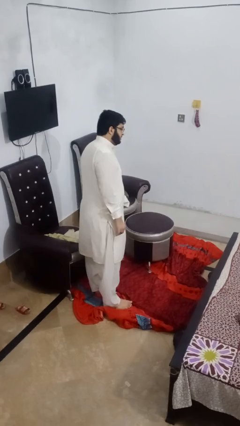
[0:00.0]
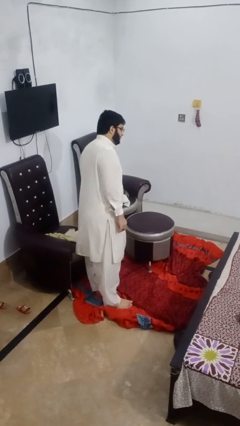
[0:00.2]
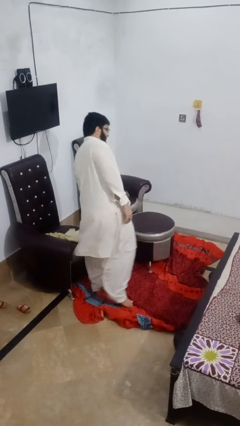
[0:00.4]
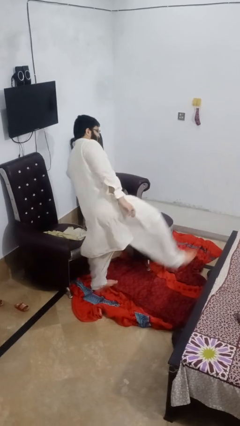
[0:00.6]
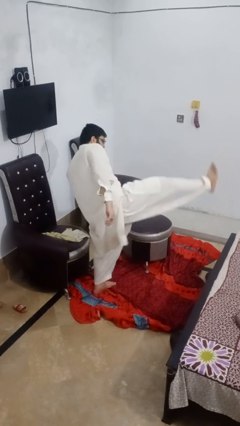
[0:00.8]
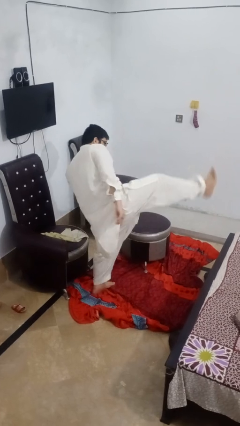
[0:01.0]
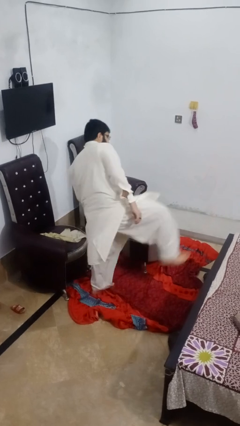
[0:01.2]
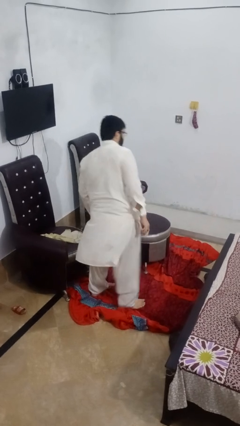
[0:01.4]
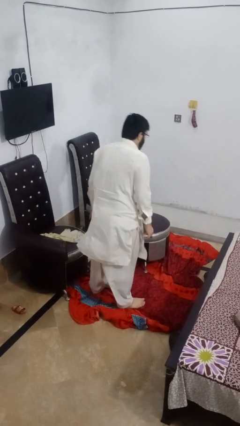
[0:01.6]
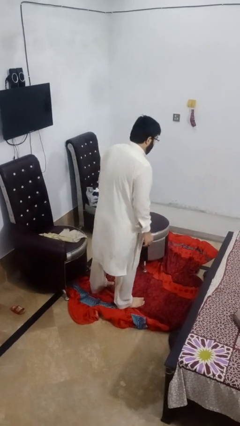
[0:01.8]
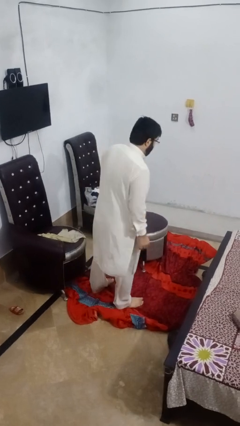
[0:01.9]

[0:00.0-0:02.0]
person karate kicks

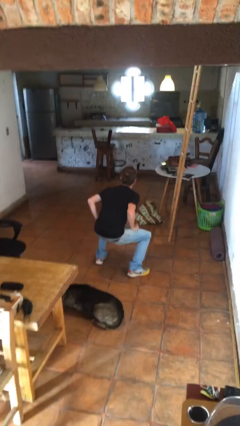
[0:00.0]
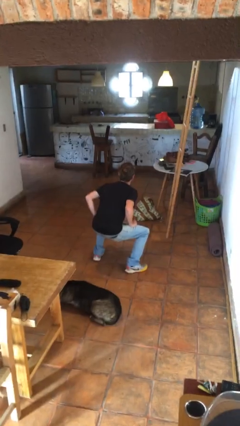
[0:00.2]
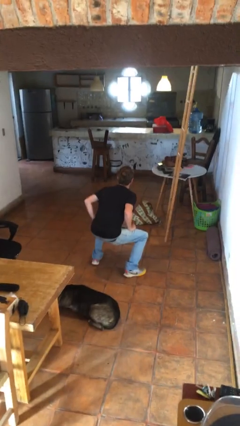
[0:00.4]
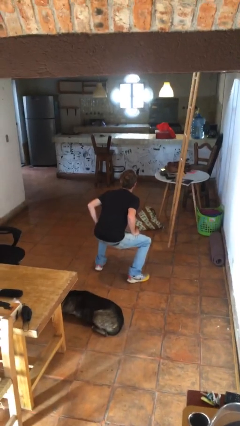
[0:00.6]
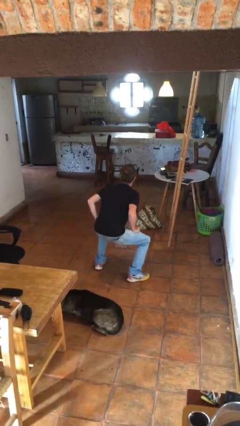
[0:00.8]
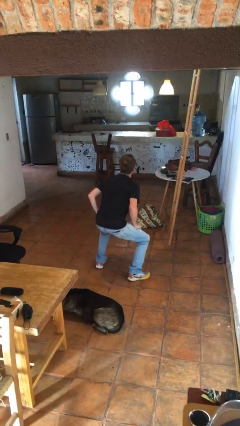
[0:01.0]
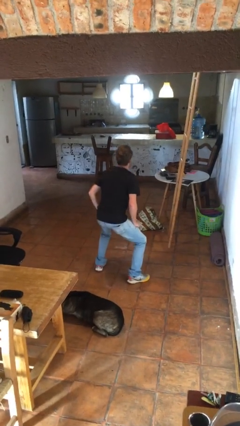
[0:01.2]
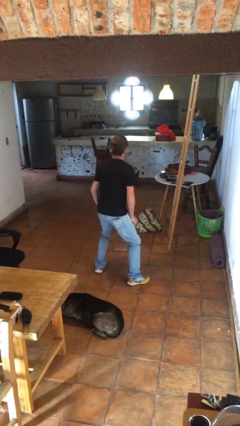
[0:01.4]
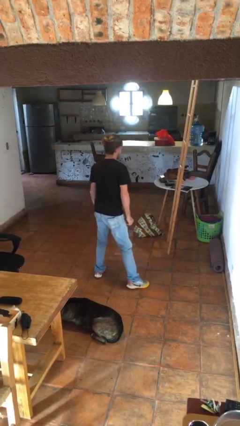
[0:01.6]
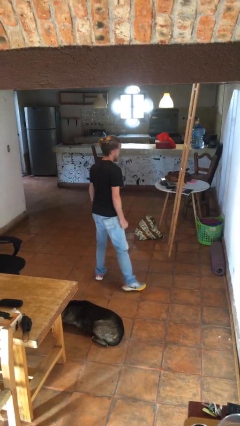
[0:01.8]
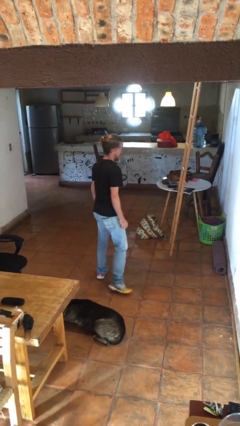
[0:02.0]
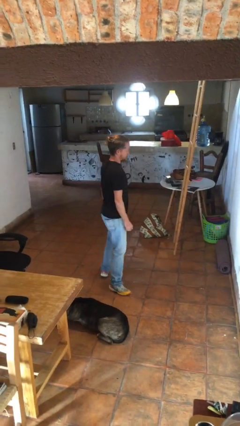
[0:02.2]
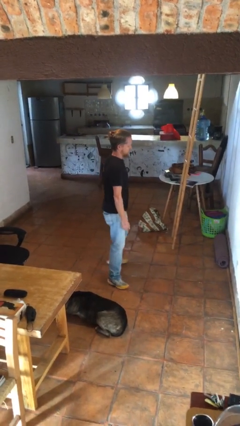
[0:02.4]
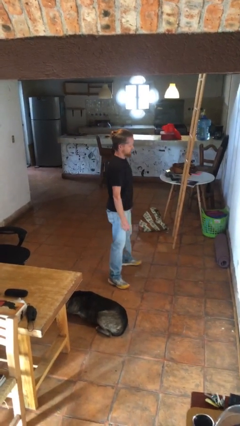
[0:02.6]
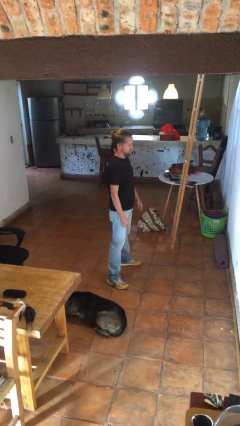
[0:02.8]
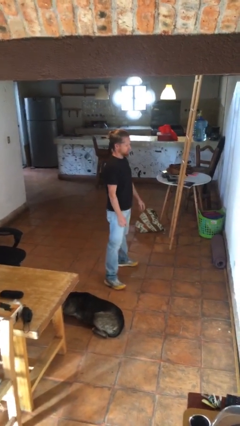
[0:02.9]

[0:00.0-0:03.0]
person stands up

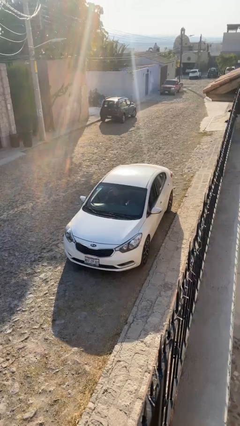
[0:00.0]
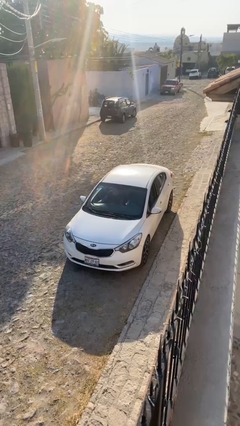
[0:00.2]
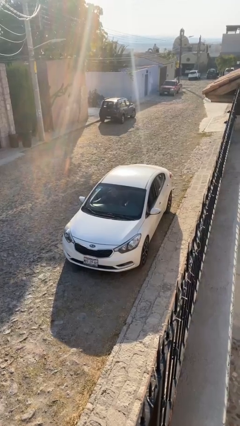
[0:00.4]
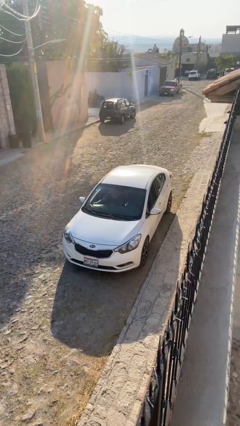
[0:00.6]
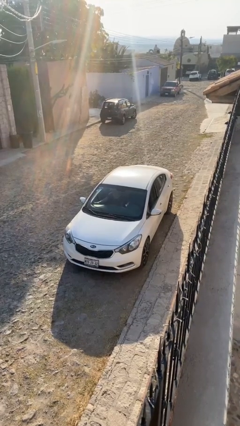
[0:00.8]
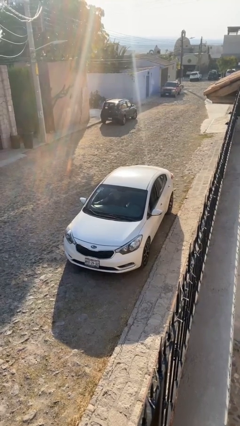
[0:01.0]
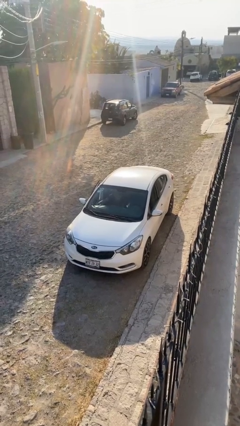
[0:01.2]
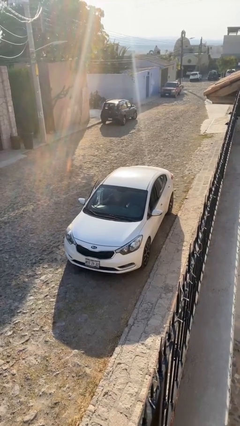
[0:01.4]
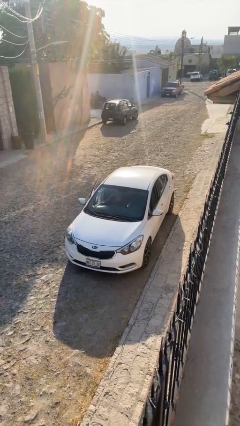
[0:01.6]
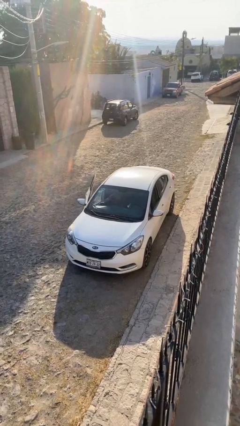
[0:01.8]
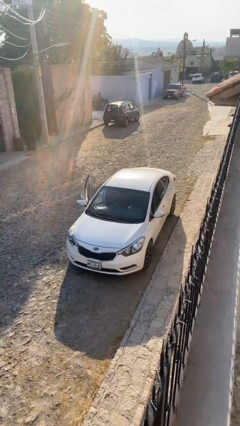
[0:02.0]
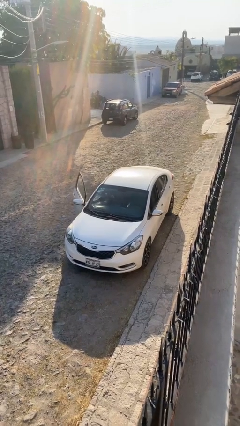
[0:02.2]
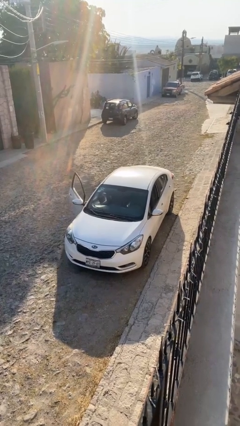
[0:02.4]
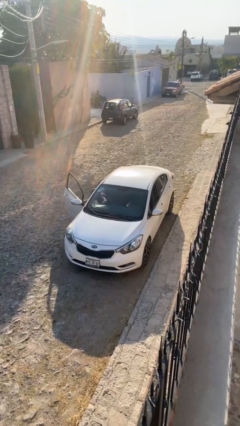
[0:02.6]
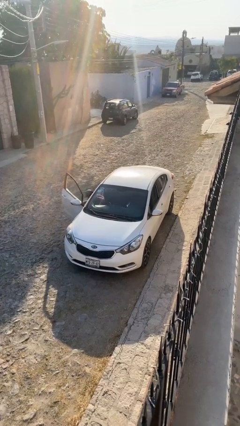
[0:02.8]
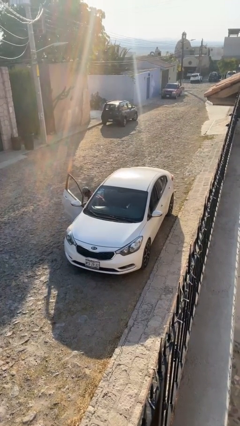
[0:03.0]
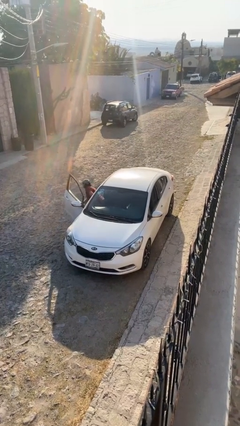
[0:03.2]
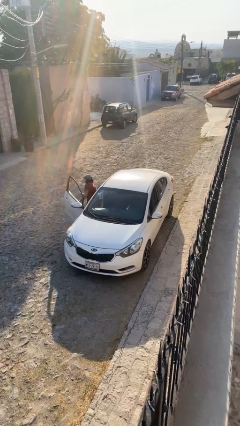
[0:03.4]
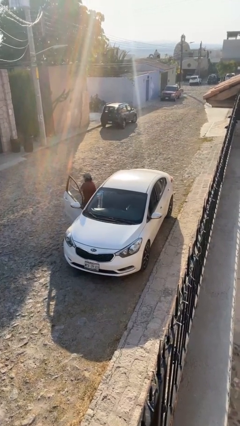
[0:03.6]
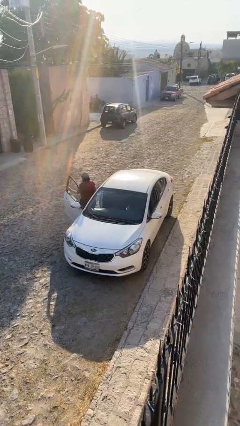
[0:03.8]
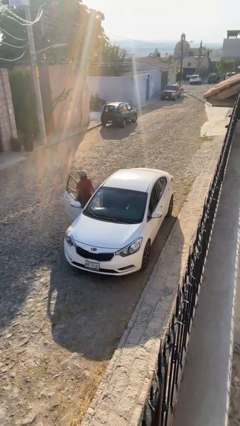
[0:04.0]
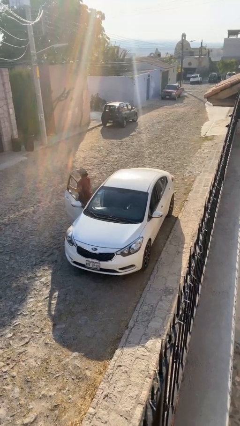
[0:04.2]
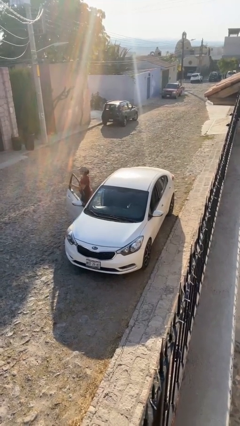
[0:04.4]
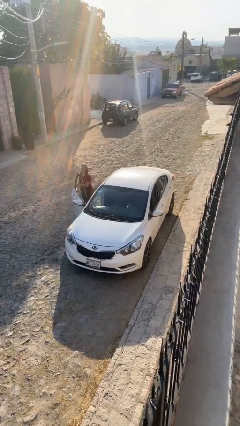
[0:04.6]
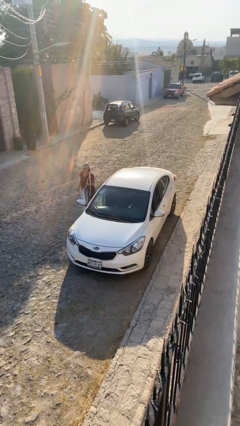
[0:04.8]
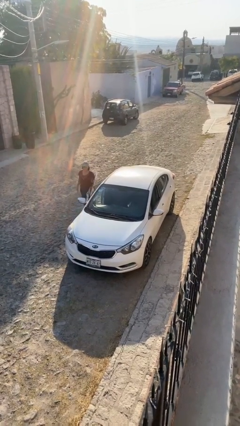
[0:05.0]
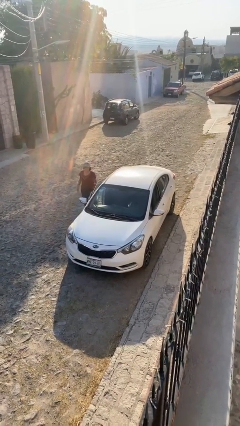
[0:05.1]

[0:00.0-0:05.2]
car drops off person

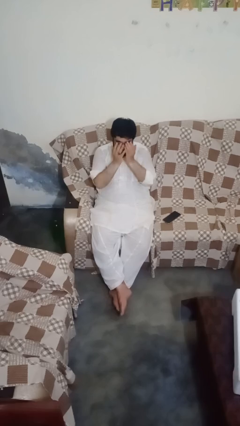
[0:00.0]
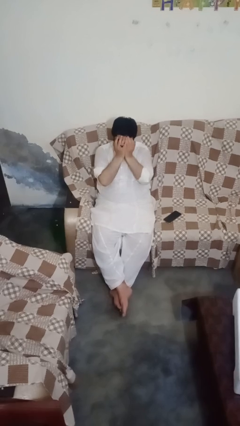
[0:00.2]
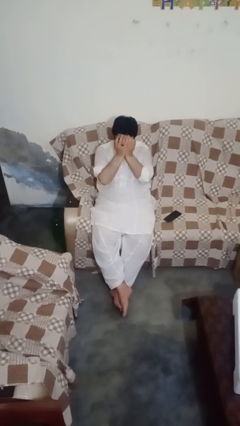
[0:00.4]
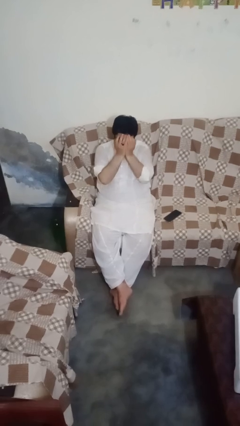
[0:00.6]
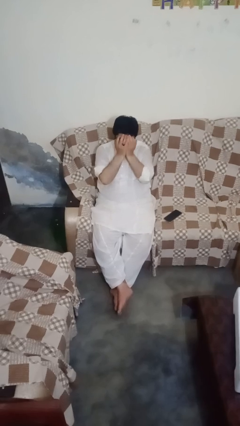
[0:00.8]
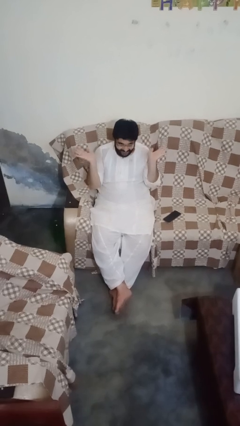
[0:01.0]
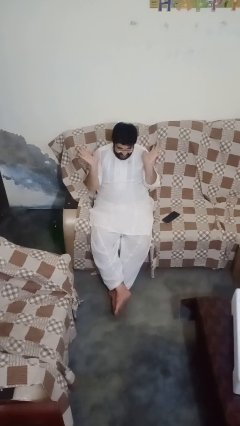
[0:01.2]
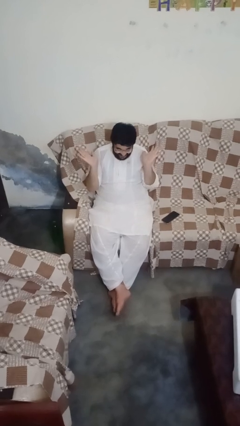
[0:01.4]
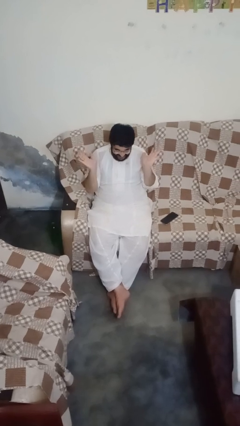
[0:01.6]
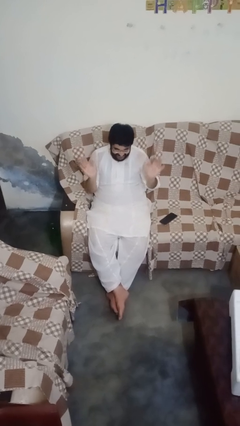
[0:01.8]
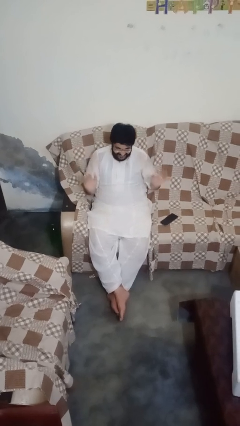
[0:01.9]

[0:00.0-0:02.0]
person covers face with hands

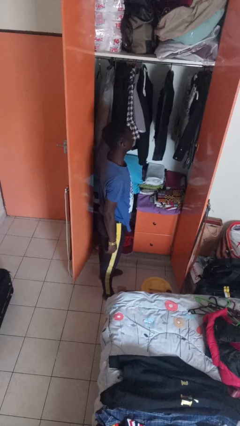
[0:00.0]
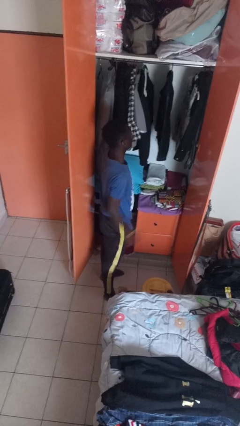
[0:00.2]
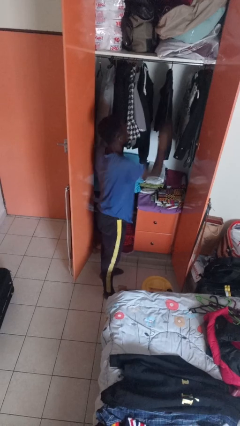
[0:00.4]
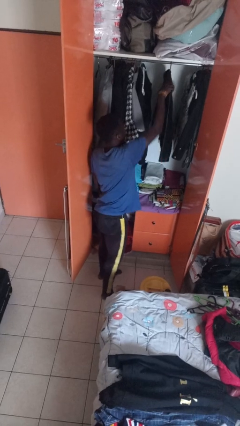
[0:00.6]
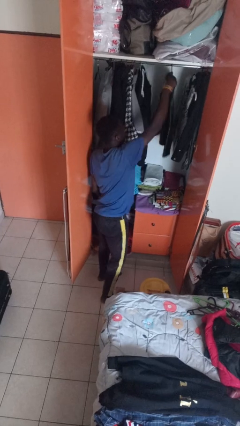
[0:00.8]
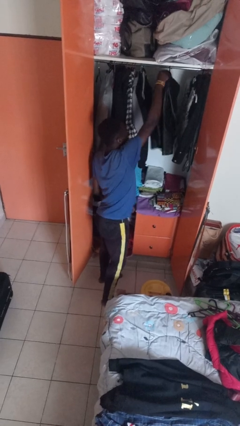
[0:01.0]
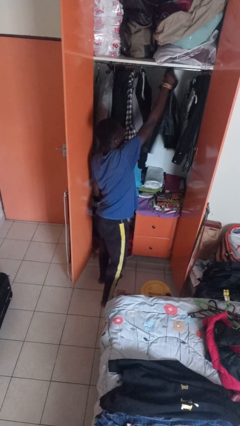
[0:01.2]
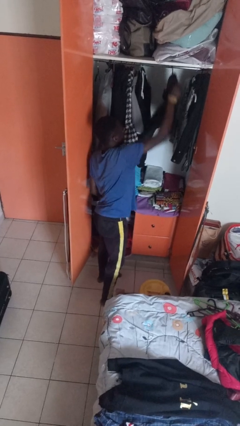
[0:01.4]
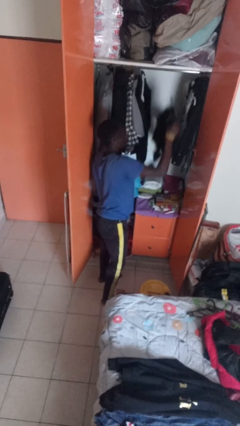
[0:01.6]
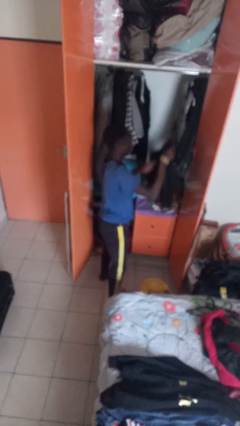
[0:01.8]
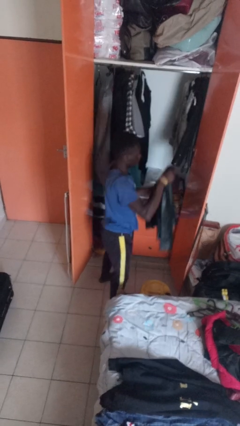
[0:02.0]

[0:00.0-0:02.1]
person takes clothes from closet

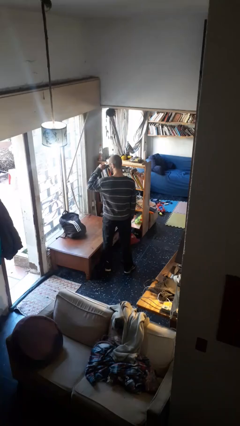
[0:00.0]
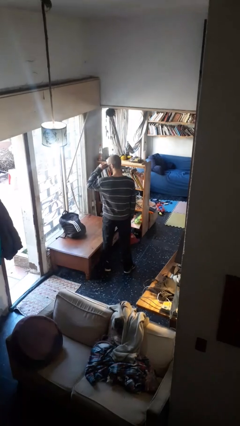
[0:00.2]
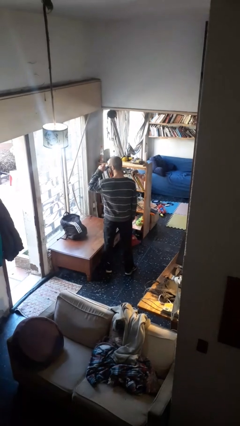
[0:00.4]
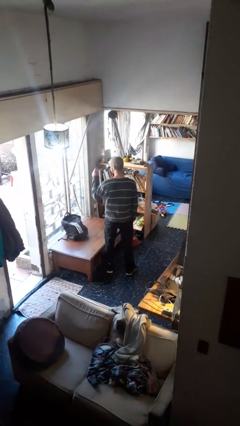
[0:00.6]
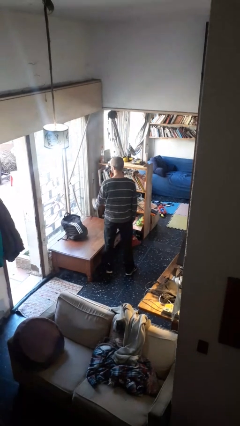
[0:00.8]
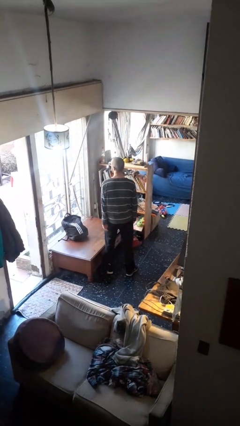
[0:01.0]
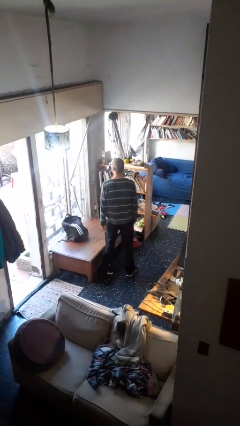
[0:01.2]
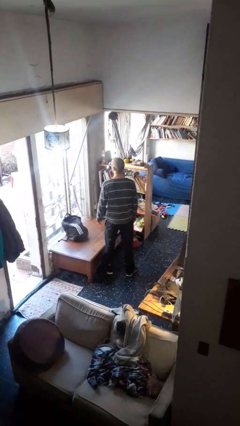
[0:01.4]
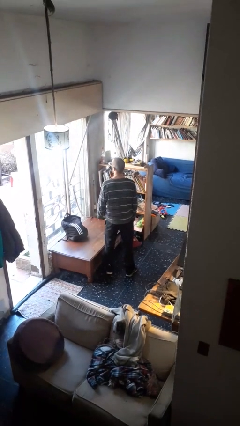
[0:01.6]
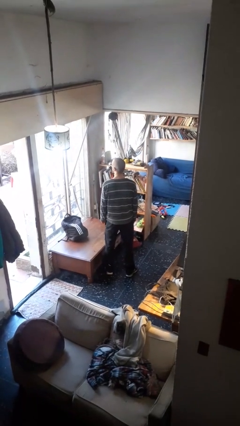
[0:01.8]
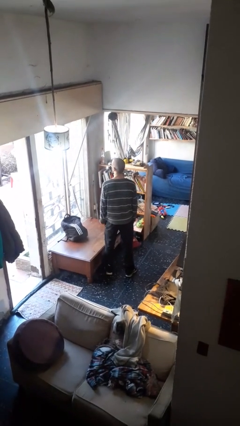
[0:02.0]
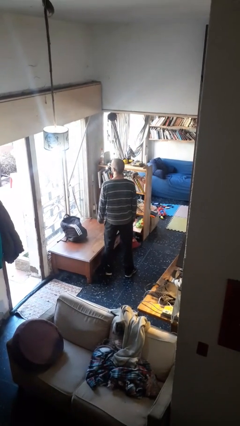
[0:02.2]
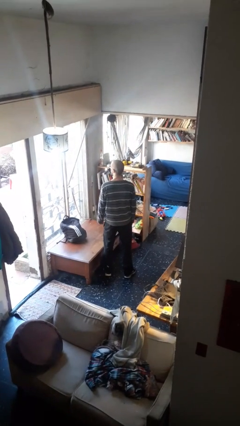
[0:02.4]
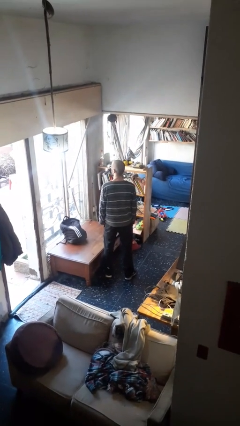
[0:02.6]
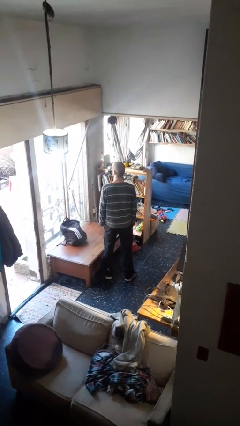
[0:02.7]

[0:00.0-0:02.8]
person puts on sunglasses

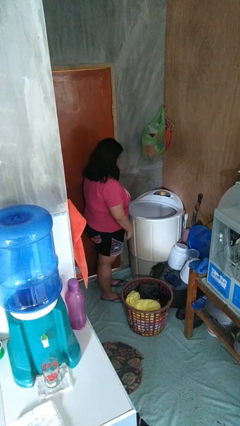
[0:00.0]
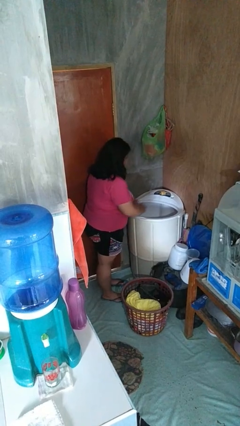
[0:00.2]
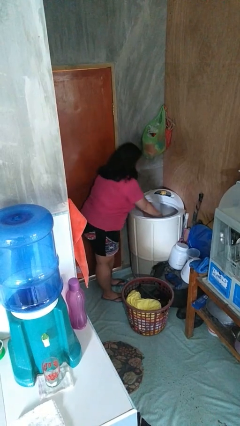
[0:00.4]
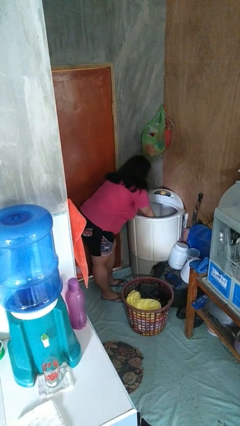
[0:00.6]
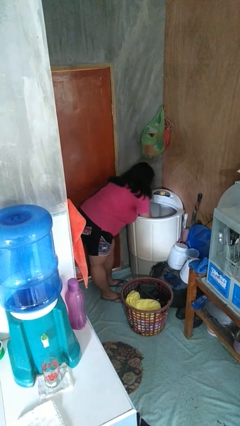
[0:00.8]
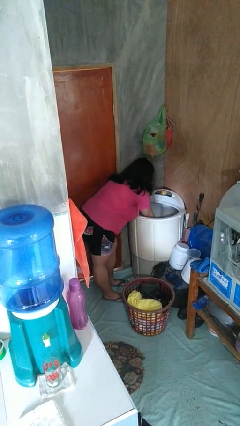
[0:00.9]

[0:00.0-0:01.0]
person unloads dryer
